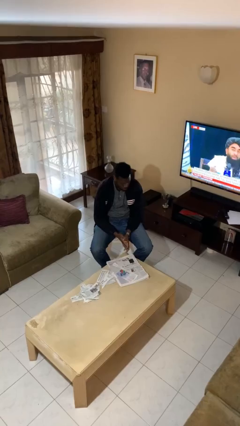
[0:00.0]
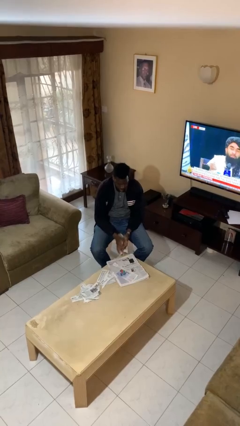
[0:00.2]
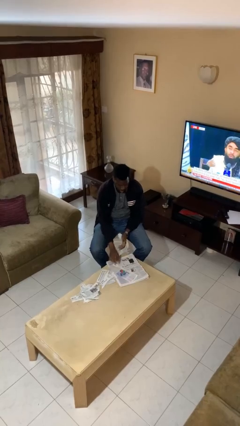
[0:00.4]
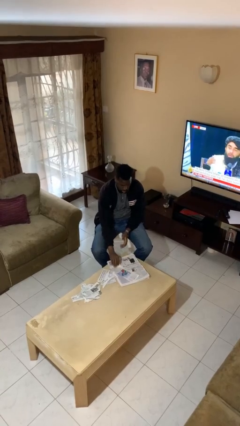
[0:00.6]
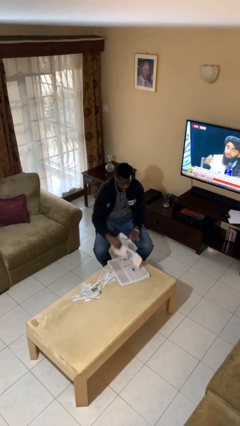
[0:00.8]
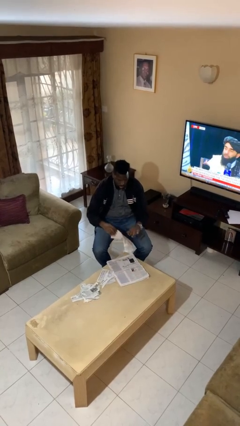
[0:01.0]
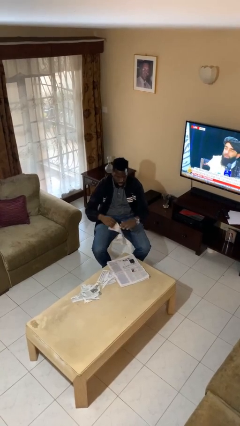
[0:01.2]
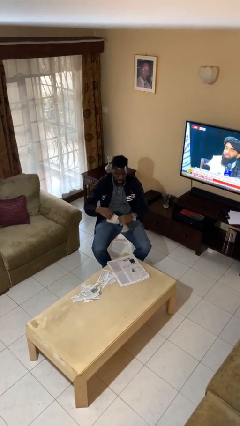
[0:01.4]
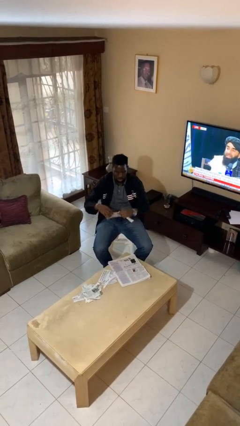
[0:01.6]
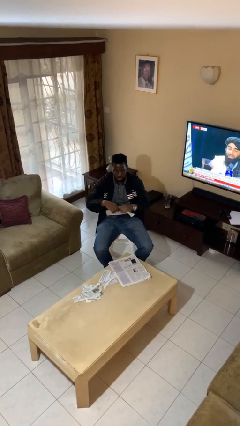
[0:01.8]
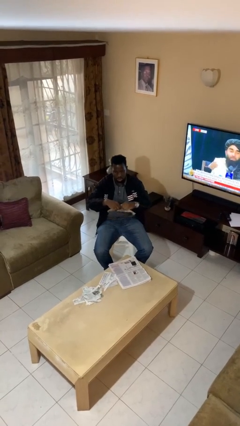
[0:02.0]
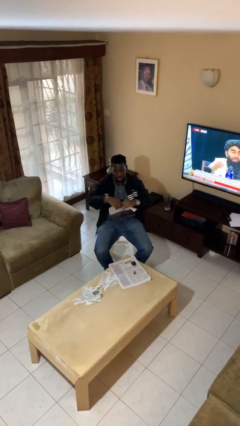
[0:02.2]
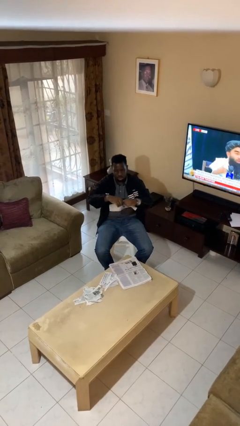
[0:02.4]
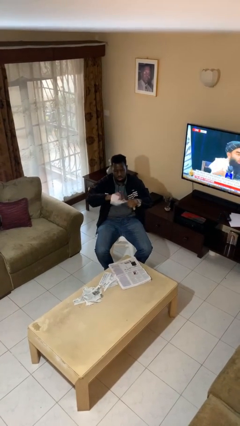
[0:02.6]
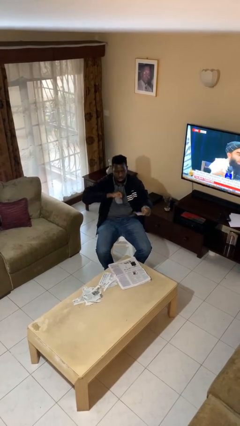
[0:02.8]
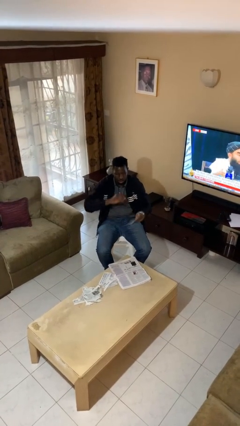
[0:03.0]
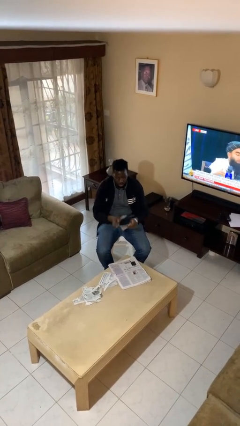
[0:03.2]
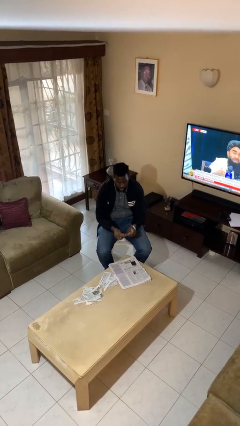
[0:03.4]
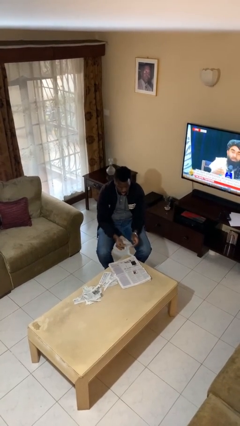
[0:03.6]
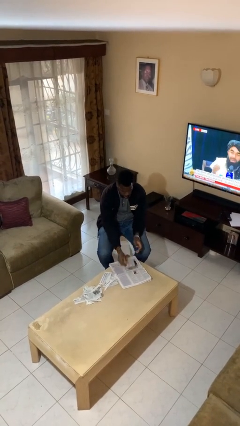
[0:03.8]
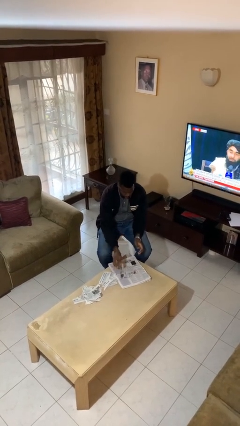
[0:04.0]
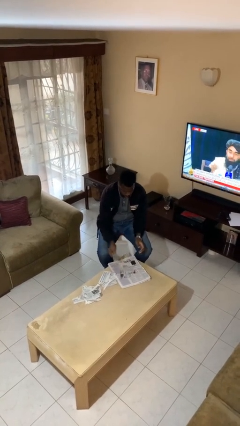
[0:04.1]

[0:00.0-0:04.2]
person tears paper

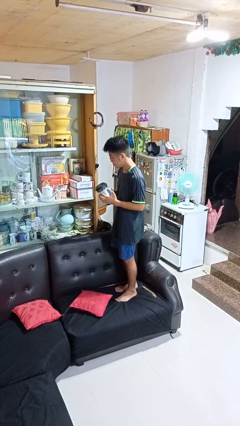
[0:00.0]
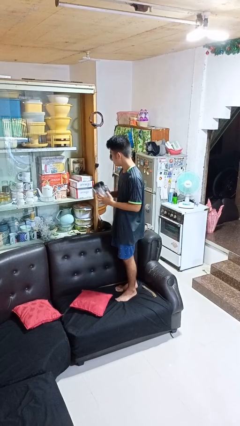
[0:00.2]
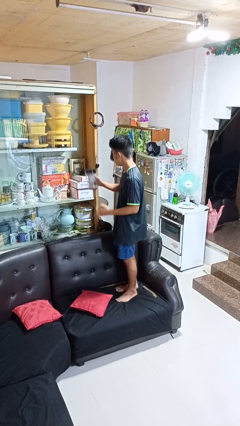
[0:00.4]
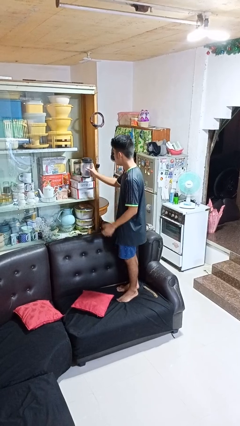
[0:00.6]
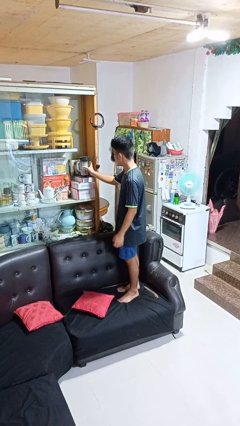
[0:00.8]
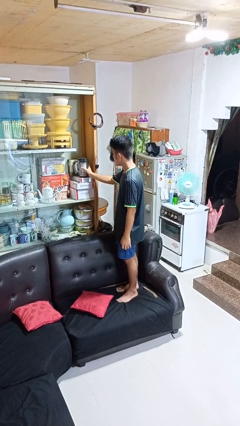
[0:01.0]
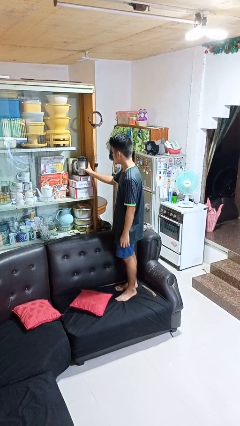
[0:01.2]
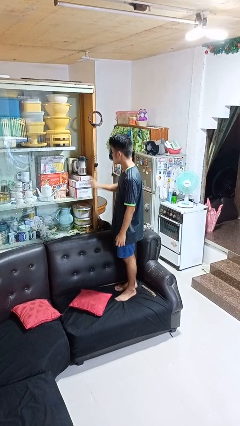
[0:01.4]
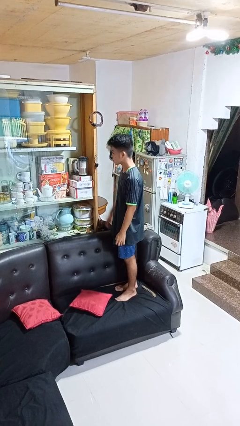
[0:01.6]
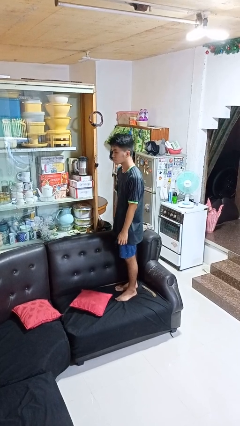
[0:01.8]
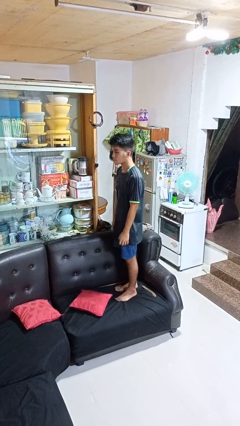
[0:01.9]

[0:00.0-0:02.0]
person puts down object into cabinet

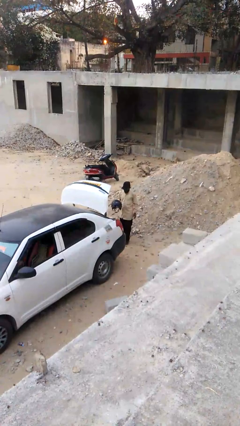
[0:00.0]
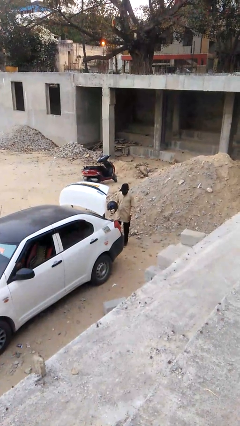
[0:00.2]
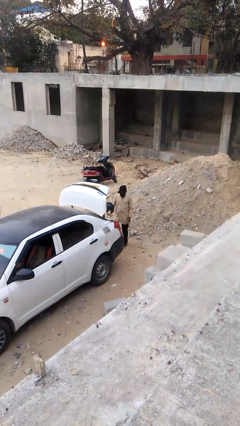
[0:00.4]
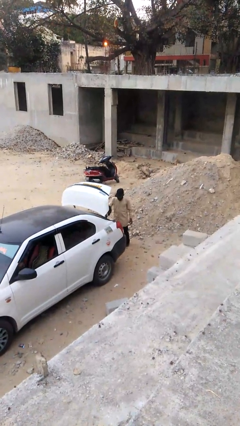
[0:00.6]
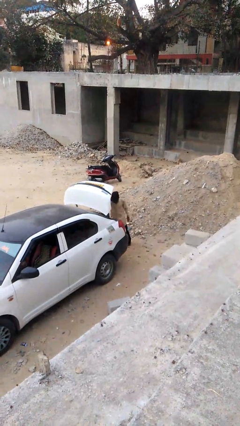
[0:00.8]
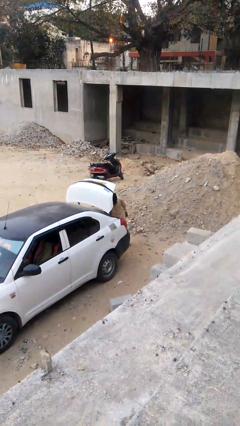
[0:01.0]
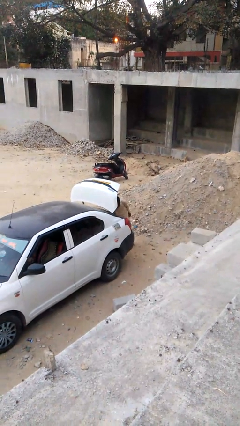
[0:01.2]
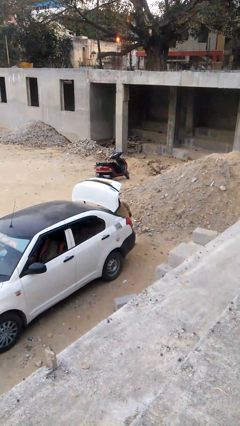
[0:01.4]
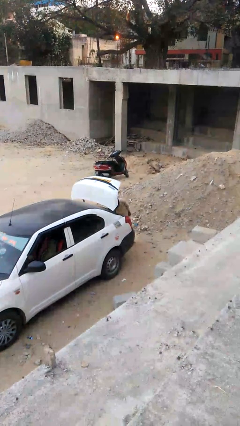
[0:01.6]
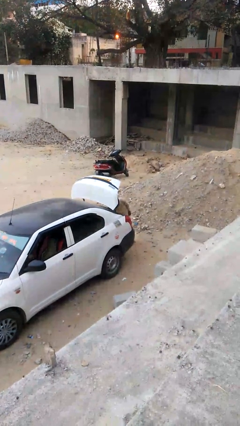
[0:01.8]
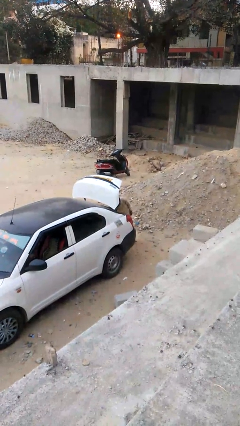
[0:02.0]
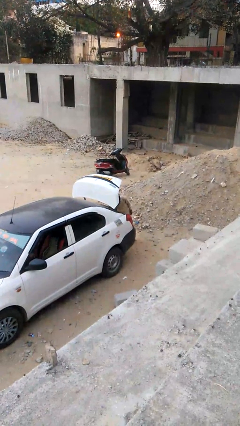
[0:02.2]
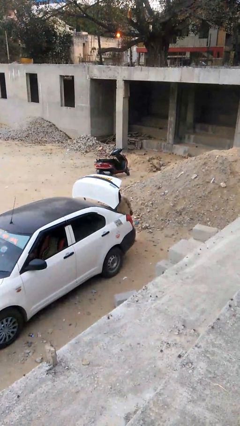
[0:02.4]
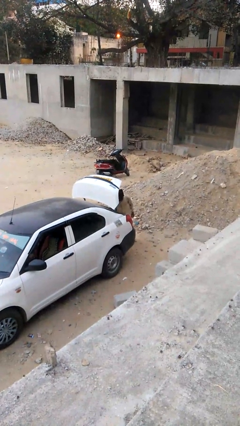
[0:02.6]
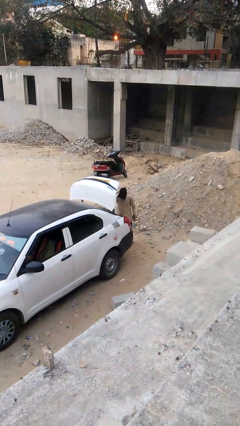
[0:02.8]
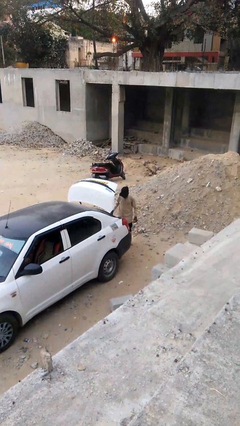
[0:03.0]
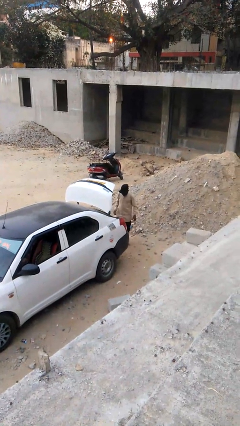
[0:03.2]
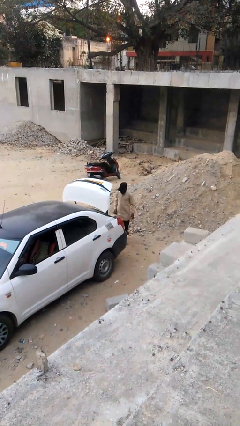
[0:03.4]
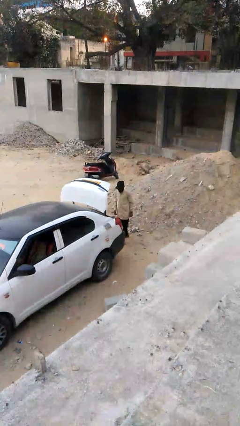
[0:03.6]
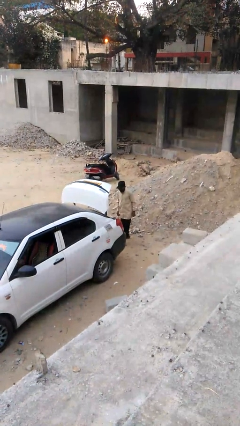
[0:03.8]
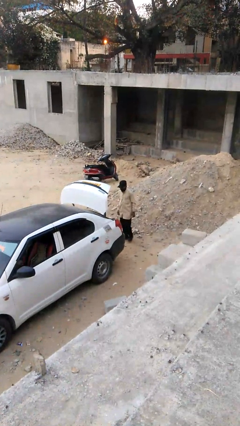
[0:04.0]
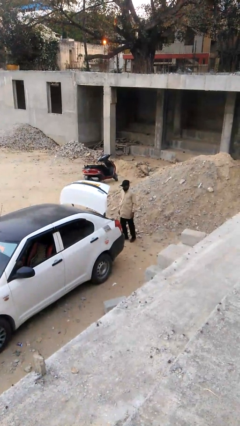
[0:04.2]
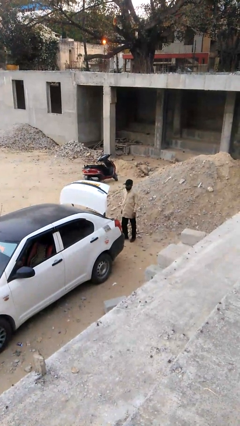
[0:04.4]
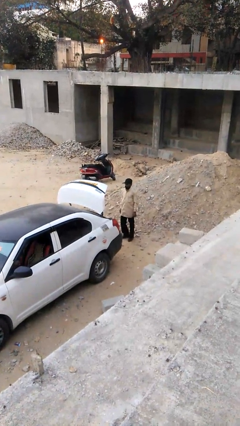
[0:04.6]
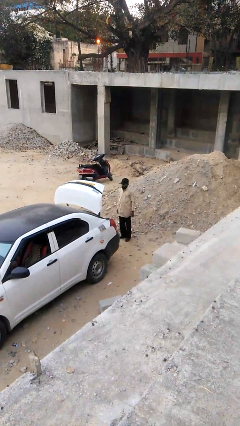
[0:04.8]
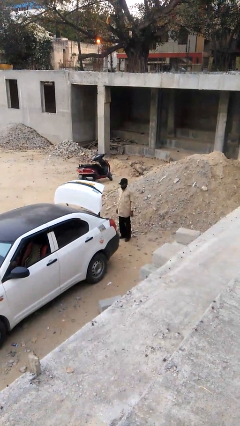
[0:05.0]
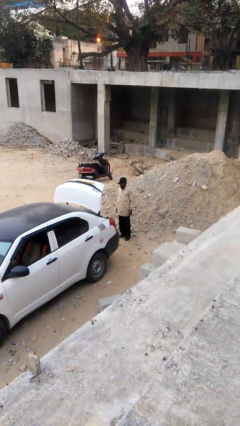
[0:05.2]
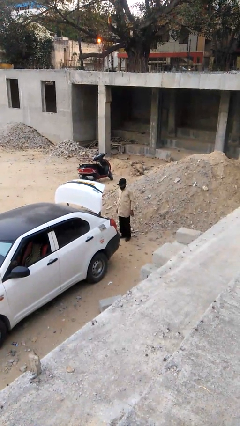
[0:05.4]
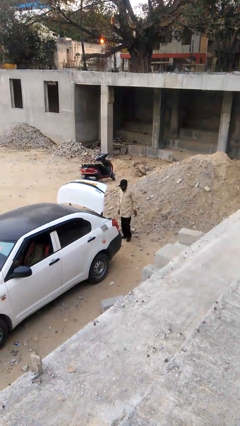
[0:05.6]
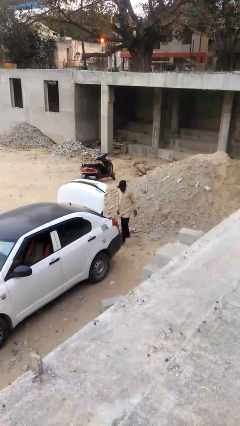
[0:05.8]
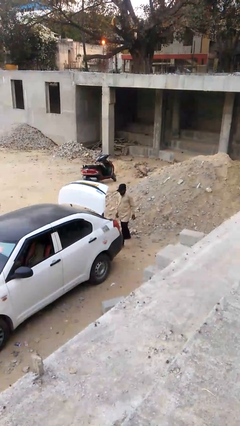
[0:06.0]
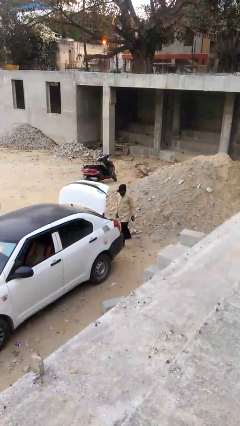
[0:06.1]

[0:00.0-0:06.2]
person loads car

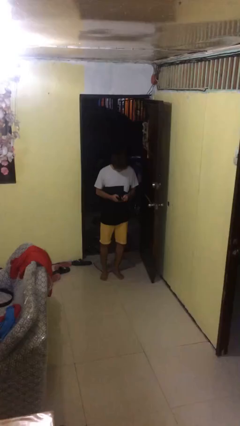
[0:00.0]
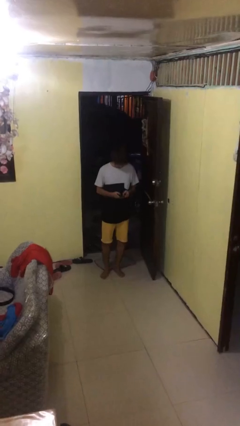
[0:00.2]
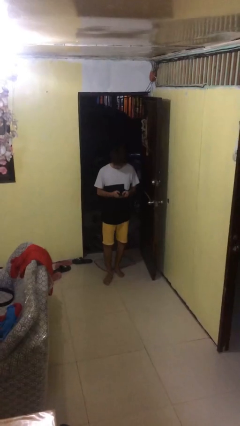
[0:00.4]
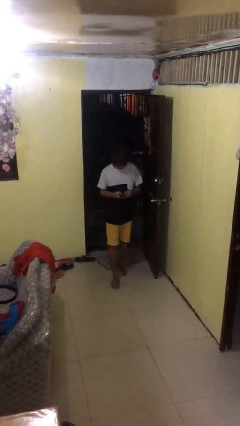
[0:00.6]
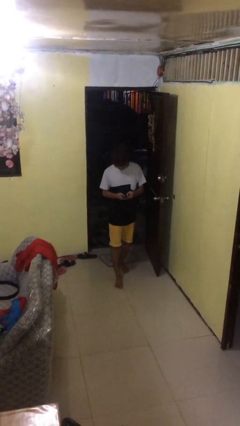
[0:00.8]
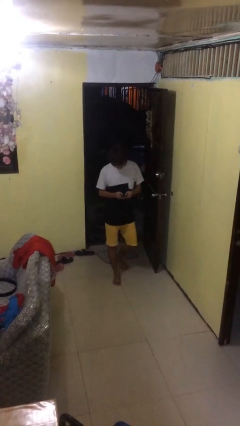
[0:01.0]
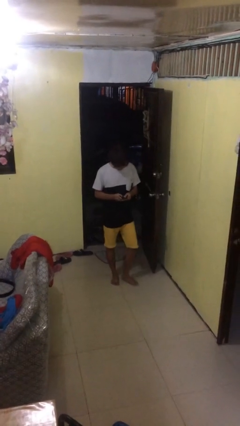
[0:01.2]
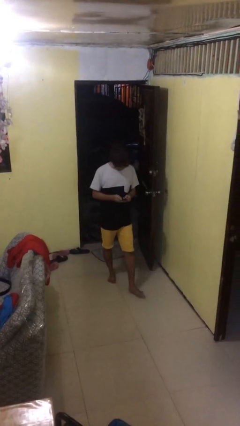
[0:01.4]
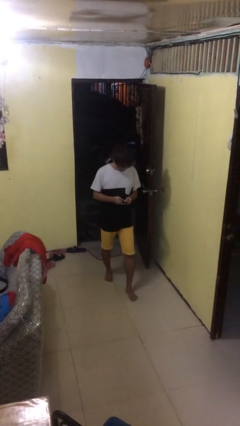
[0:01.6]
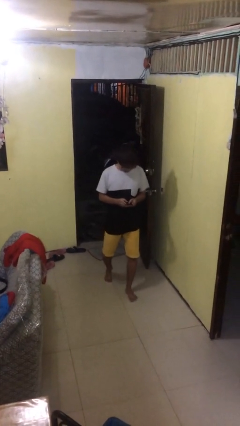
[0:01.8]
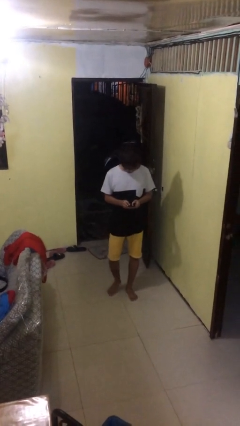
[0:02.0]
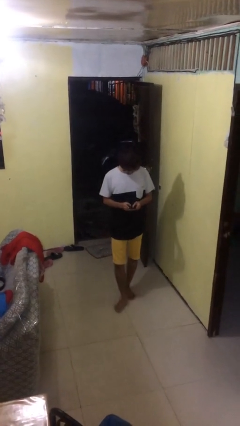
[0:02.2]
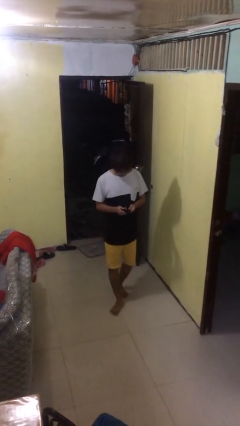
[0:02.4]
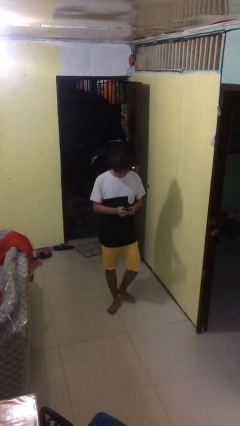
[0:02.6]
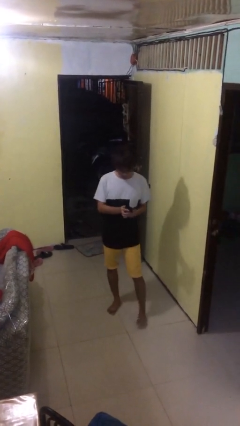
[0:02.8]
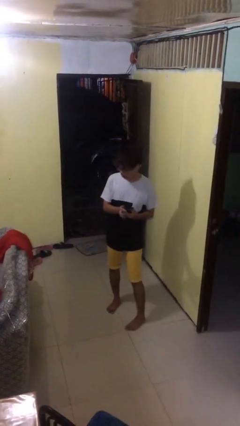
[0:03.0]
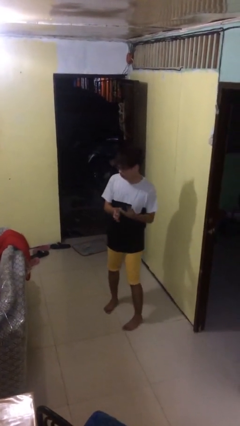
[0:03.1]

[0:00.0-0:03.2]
person texts on phone

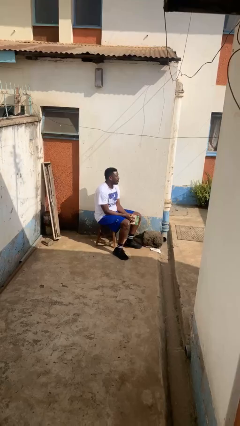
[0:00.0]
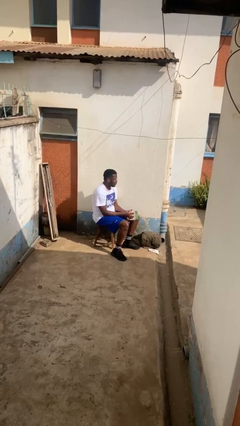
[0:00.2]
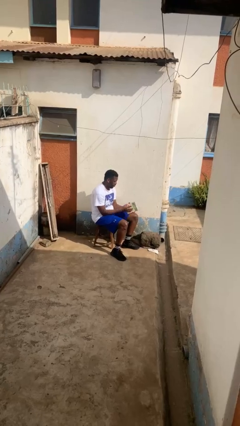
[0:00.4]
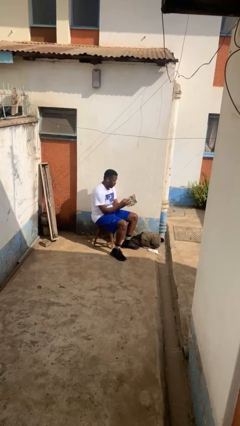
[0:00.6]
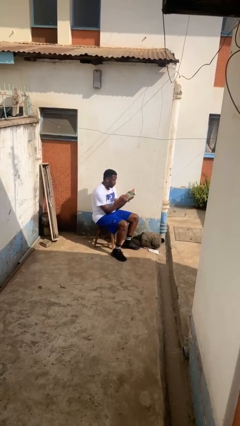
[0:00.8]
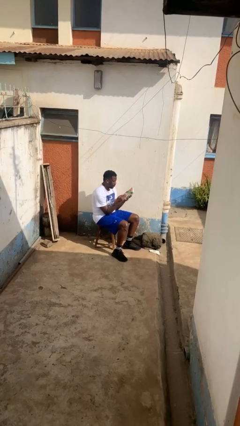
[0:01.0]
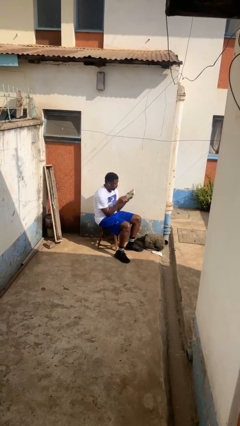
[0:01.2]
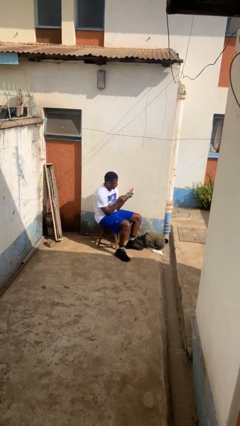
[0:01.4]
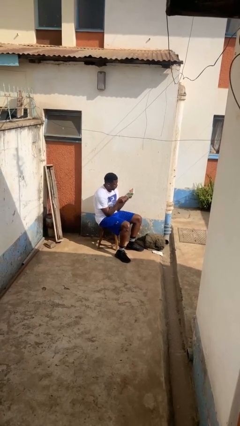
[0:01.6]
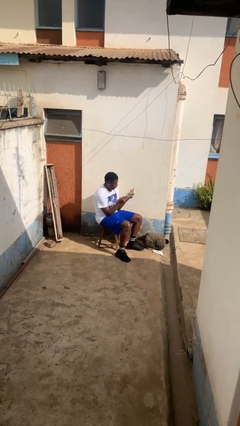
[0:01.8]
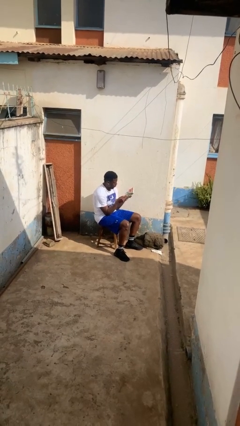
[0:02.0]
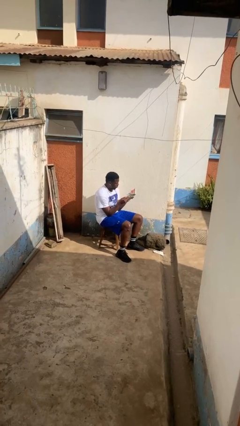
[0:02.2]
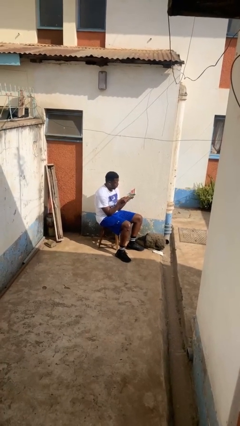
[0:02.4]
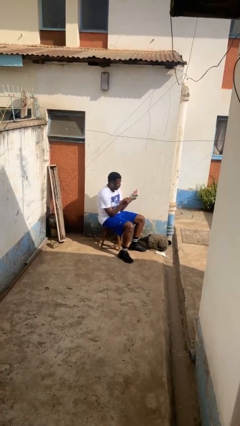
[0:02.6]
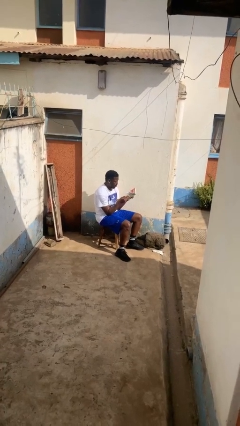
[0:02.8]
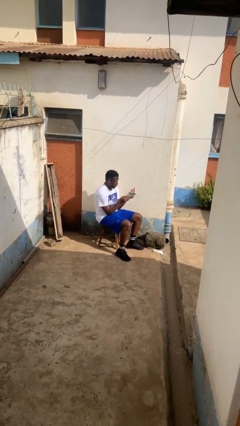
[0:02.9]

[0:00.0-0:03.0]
person reads book
